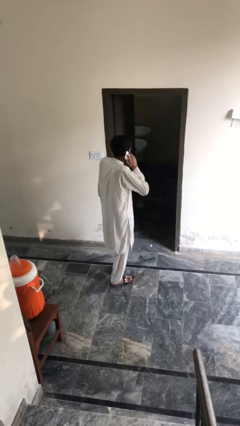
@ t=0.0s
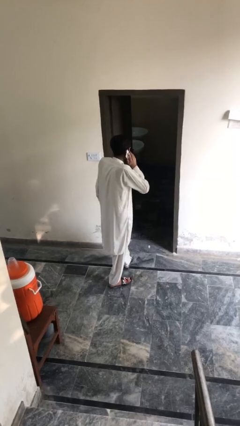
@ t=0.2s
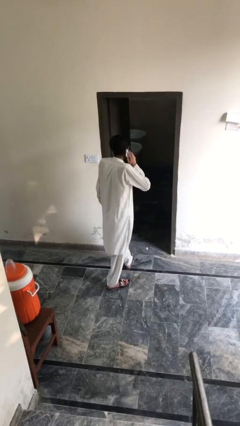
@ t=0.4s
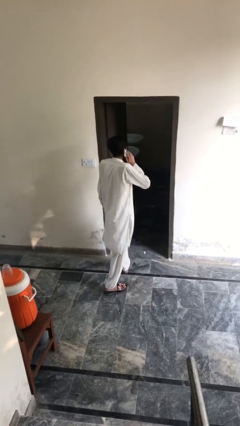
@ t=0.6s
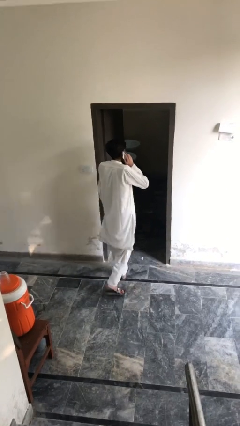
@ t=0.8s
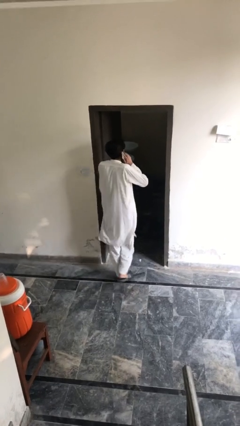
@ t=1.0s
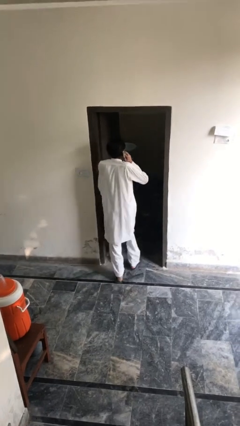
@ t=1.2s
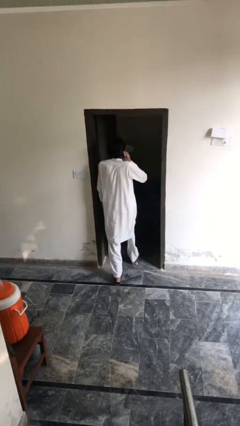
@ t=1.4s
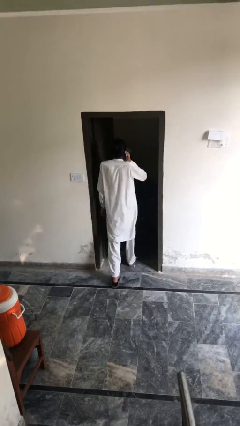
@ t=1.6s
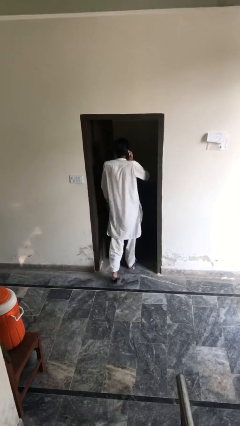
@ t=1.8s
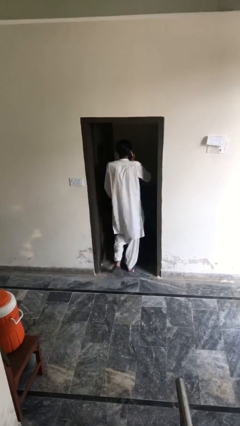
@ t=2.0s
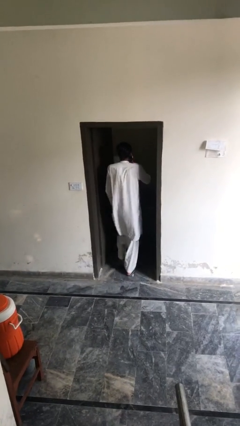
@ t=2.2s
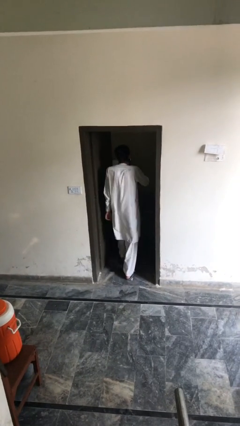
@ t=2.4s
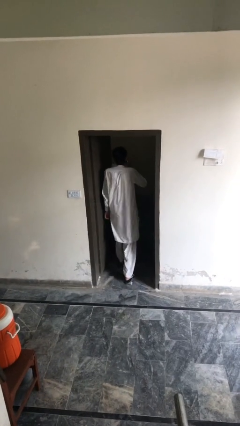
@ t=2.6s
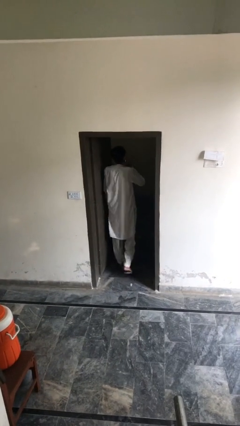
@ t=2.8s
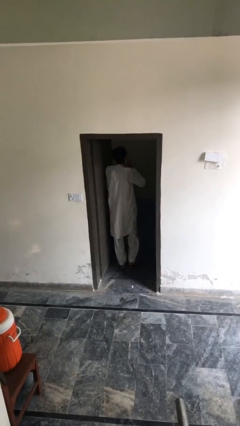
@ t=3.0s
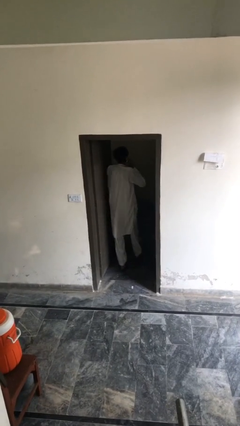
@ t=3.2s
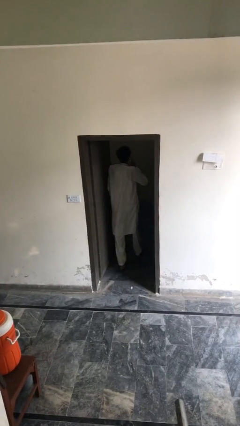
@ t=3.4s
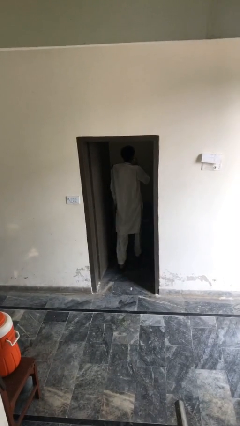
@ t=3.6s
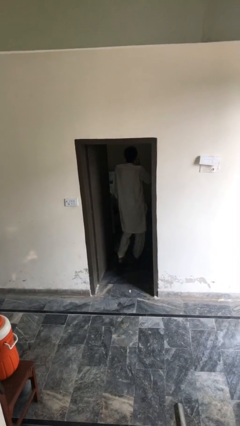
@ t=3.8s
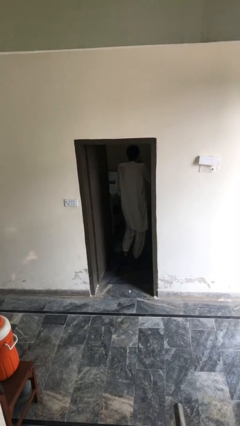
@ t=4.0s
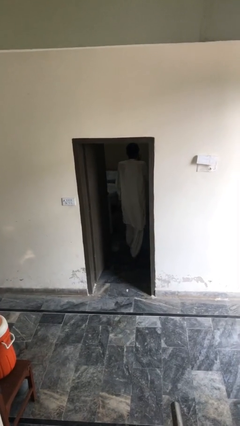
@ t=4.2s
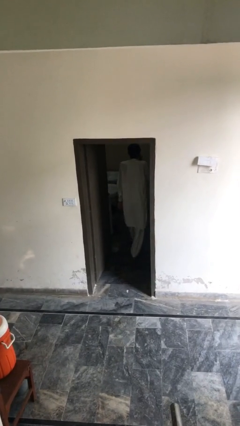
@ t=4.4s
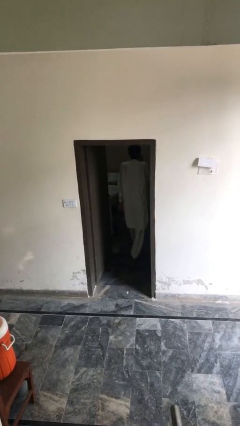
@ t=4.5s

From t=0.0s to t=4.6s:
person exits scene through structure

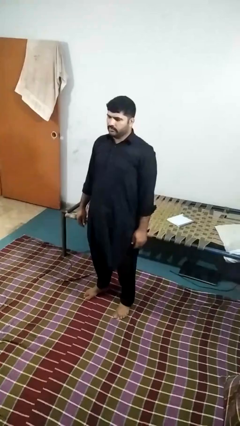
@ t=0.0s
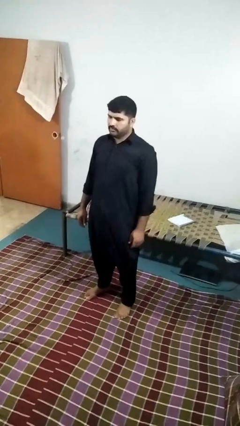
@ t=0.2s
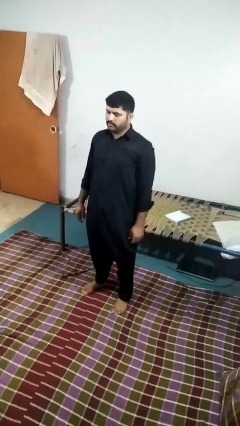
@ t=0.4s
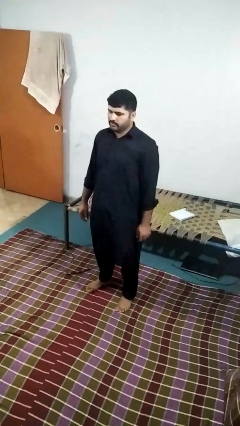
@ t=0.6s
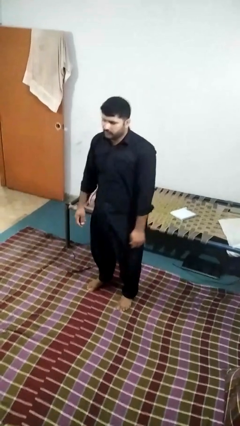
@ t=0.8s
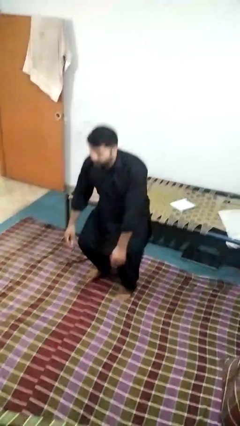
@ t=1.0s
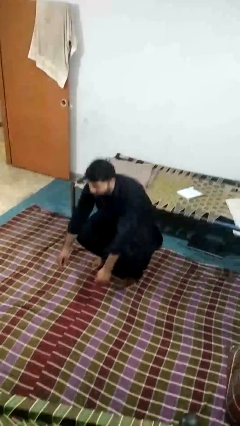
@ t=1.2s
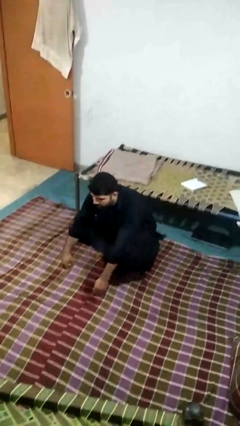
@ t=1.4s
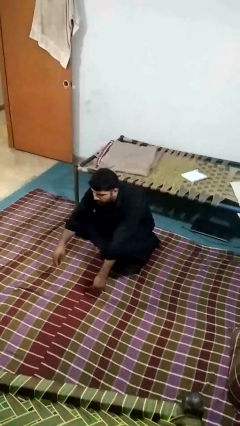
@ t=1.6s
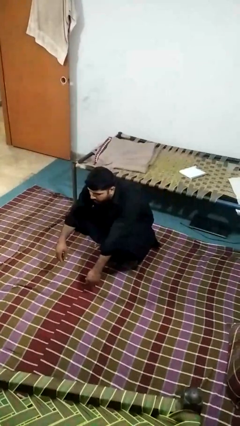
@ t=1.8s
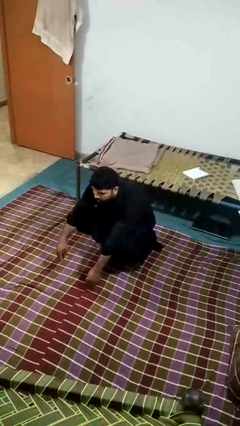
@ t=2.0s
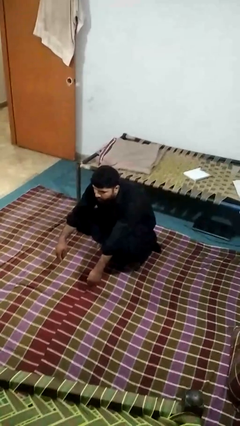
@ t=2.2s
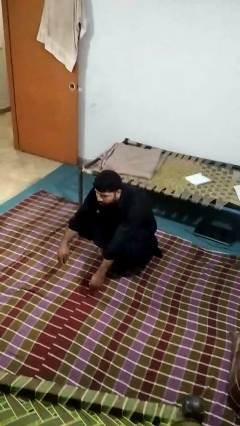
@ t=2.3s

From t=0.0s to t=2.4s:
person squats

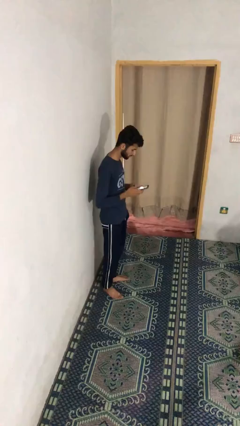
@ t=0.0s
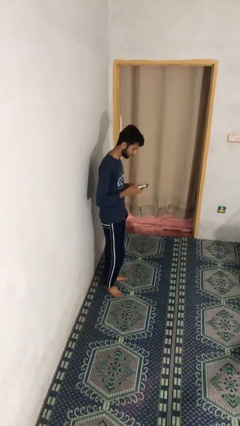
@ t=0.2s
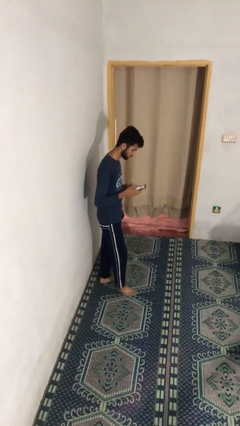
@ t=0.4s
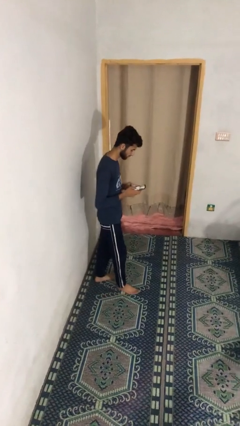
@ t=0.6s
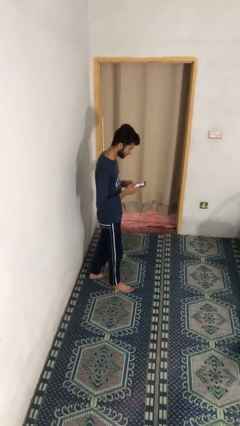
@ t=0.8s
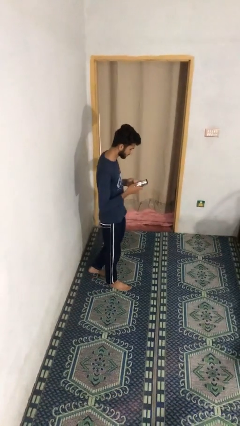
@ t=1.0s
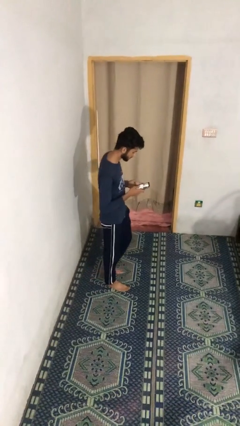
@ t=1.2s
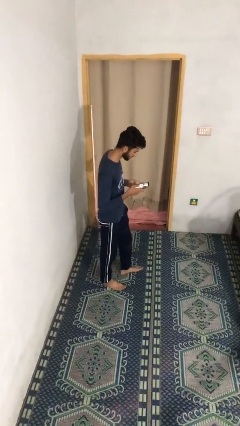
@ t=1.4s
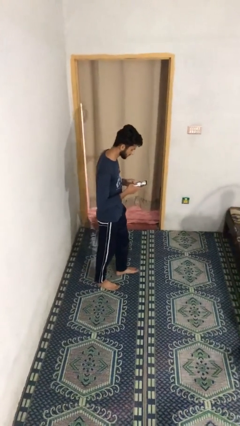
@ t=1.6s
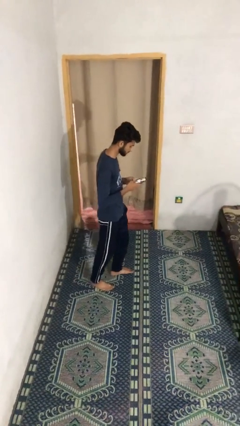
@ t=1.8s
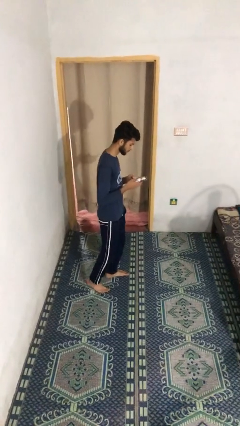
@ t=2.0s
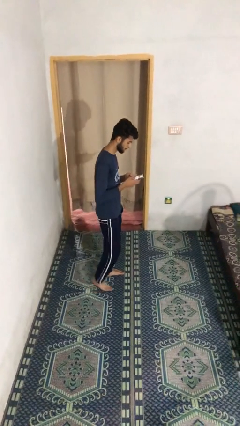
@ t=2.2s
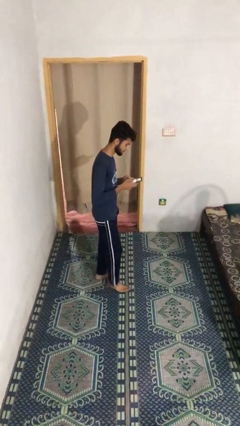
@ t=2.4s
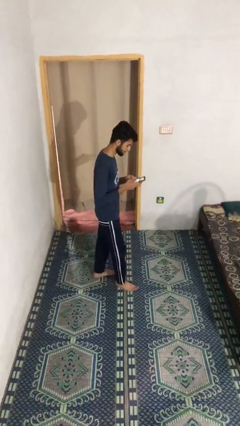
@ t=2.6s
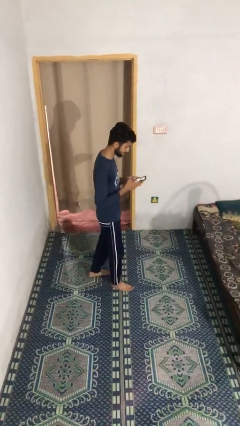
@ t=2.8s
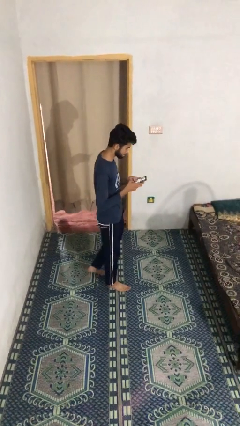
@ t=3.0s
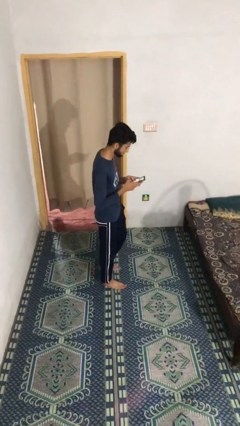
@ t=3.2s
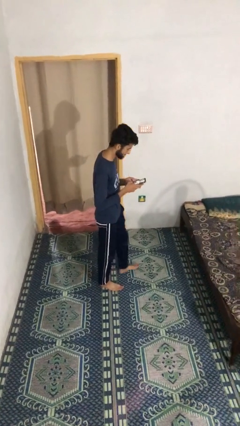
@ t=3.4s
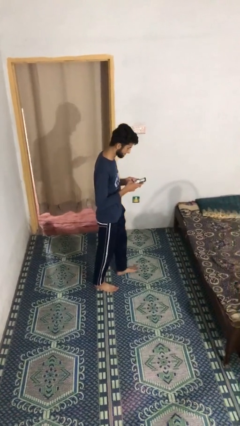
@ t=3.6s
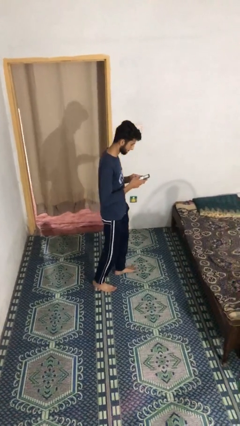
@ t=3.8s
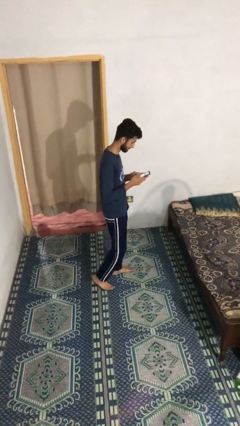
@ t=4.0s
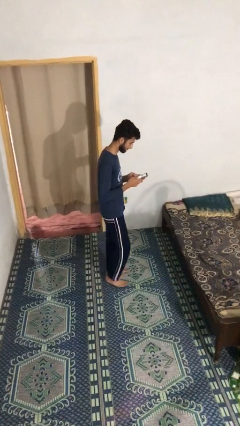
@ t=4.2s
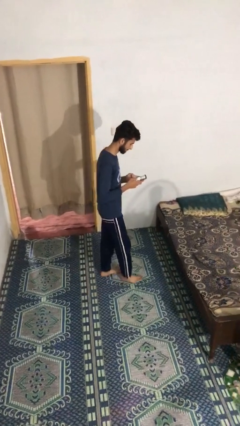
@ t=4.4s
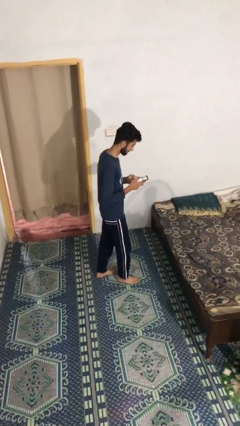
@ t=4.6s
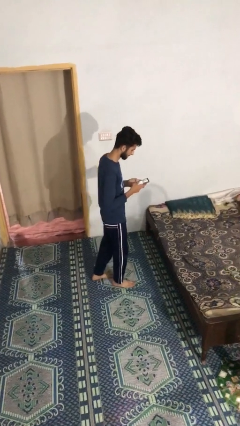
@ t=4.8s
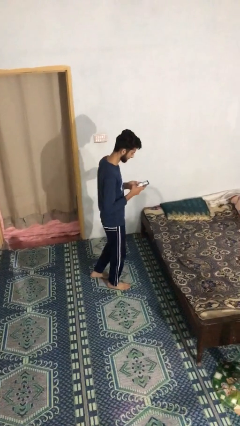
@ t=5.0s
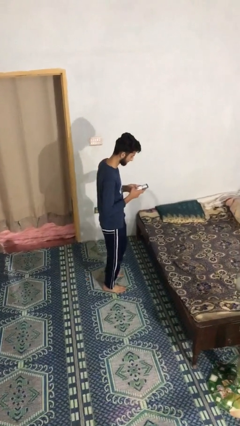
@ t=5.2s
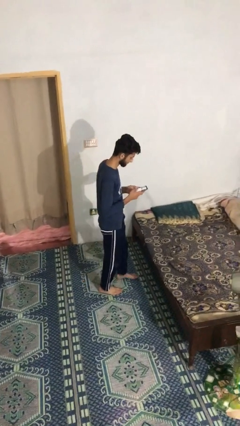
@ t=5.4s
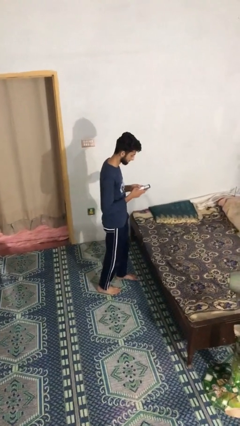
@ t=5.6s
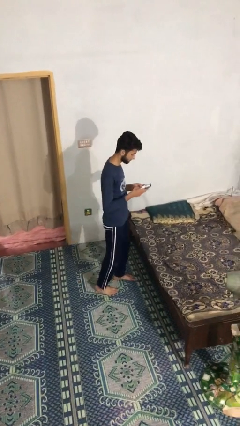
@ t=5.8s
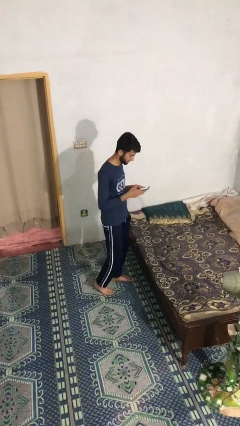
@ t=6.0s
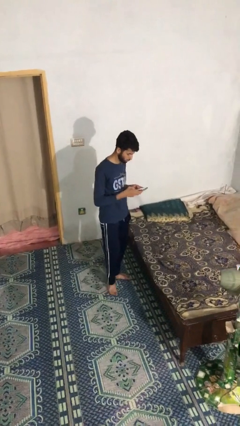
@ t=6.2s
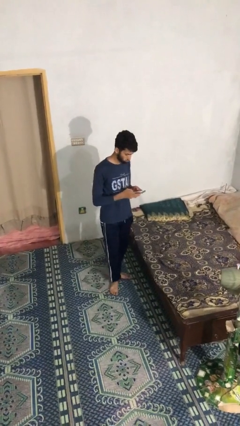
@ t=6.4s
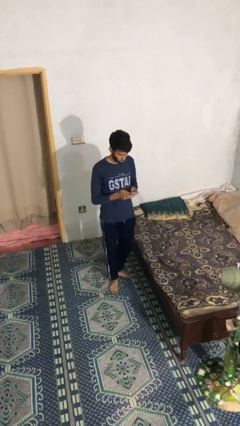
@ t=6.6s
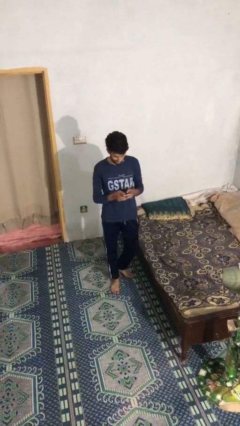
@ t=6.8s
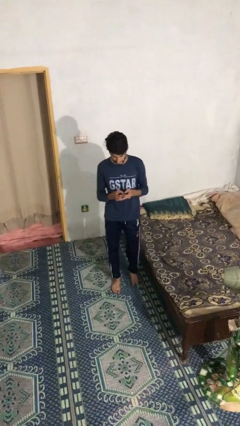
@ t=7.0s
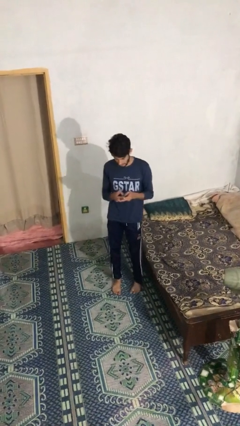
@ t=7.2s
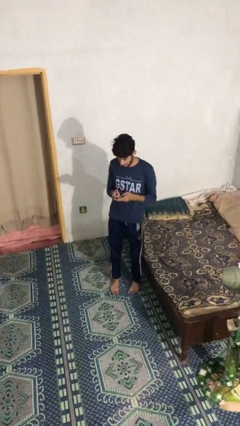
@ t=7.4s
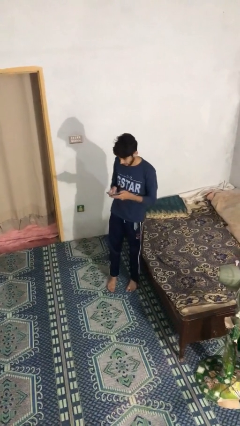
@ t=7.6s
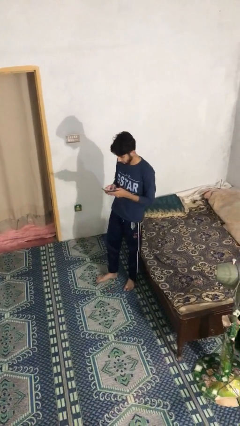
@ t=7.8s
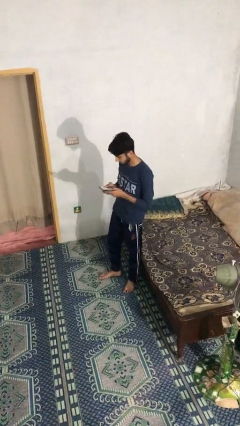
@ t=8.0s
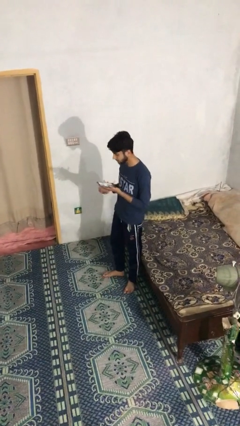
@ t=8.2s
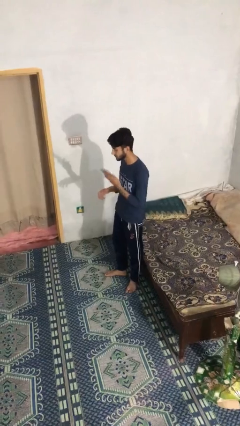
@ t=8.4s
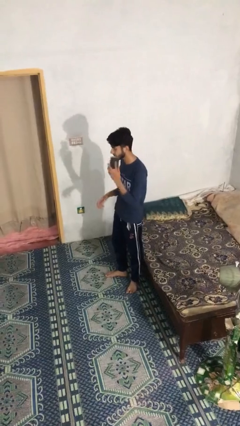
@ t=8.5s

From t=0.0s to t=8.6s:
person texts on phone

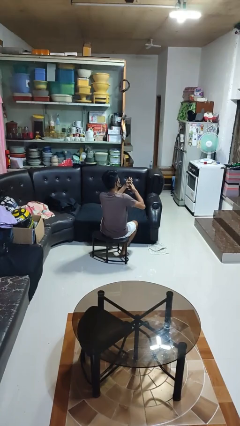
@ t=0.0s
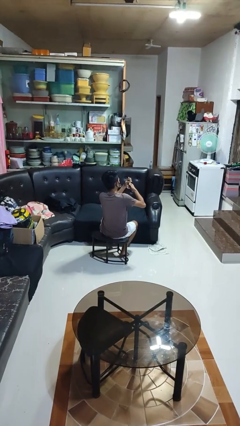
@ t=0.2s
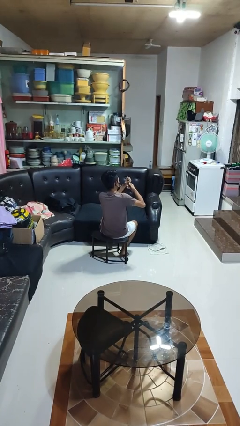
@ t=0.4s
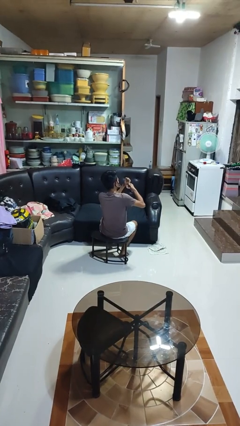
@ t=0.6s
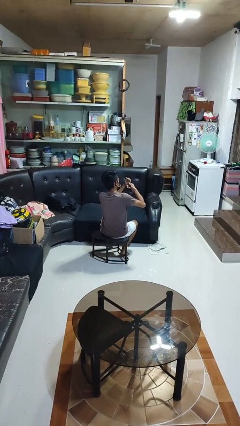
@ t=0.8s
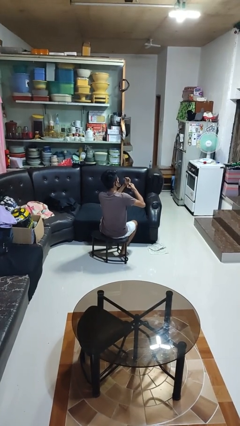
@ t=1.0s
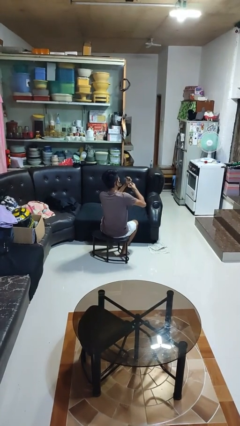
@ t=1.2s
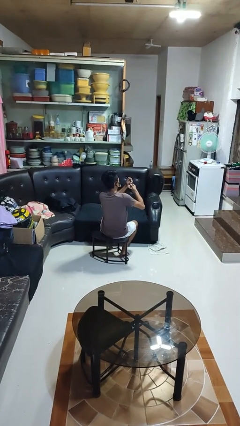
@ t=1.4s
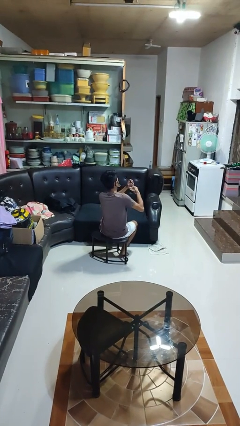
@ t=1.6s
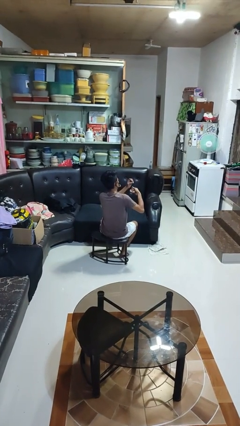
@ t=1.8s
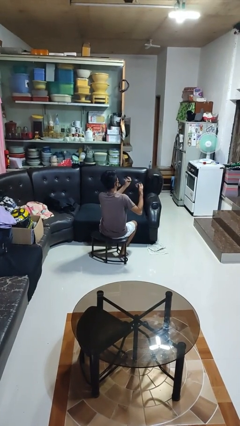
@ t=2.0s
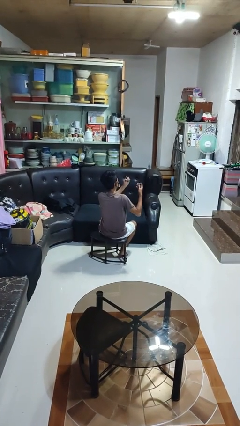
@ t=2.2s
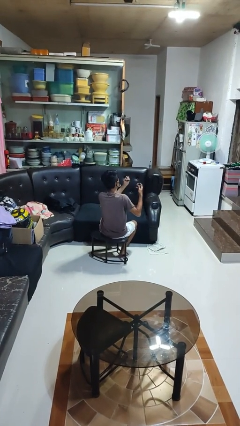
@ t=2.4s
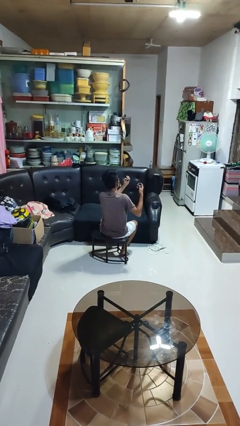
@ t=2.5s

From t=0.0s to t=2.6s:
person clips fingernails
